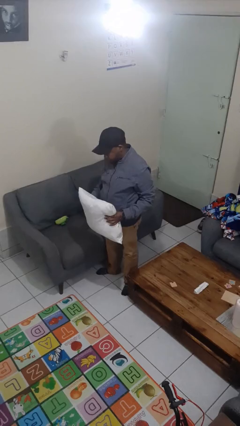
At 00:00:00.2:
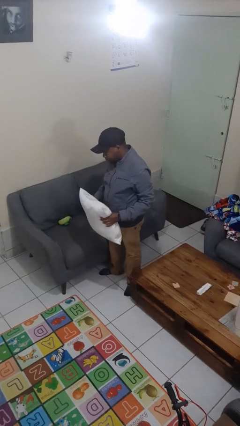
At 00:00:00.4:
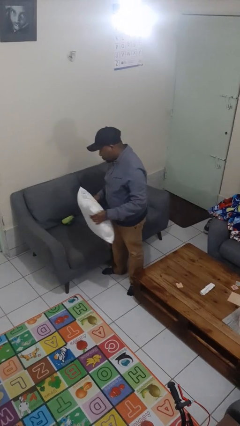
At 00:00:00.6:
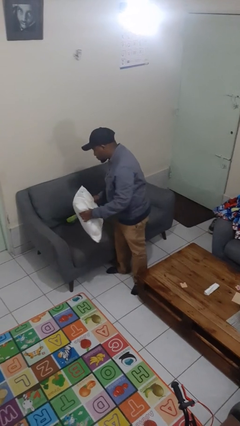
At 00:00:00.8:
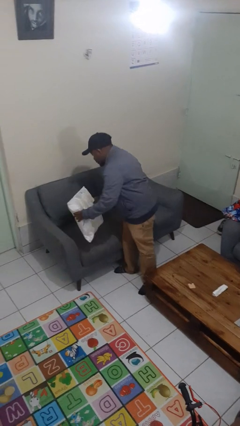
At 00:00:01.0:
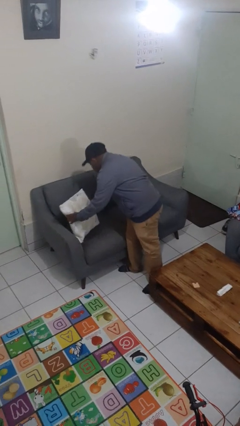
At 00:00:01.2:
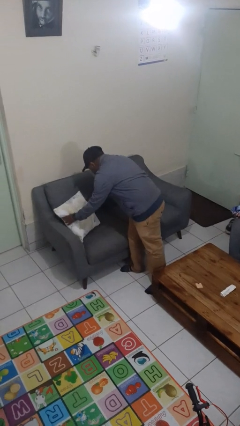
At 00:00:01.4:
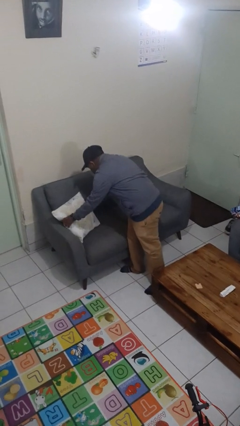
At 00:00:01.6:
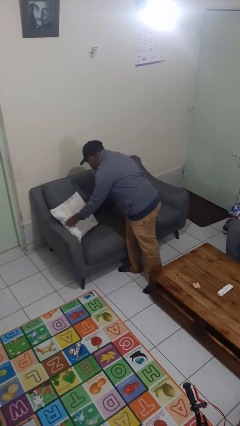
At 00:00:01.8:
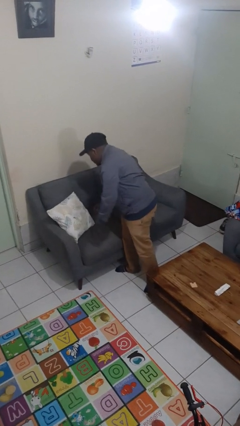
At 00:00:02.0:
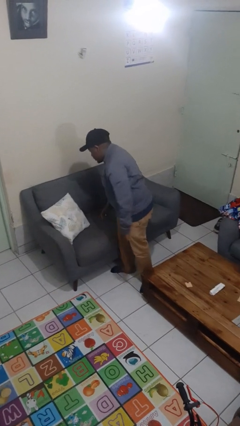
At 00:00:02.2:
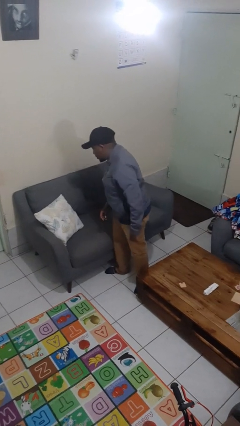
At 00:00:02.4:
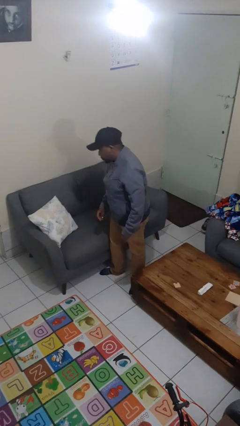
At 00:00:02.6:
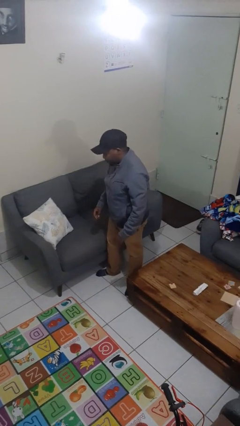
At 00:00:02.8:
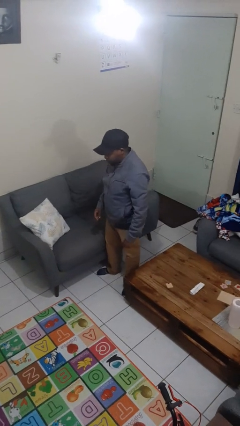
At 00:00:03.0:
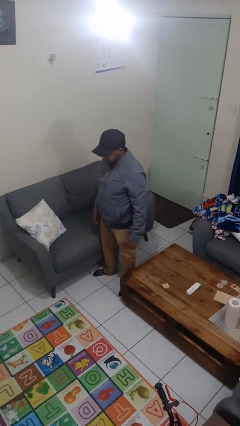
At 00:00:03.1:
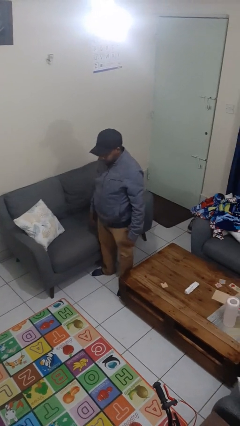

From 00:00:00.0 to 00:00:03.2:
person puts down object on couch

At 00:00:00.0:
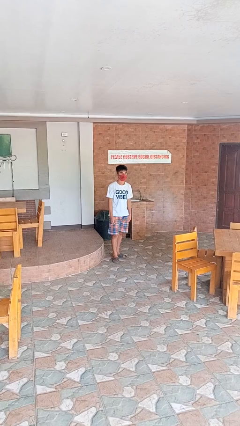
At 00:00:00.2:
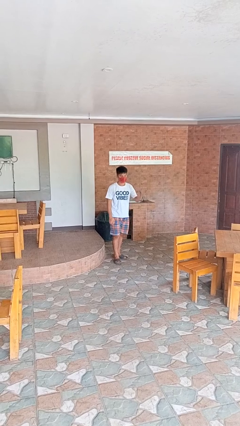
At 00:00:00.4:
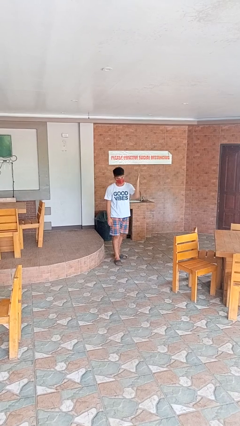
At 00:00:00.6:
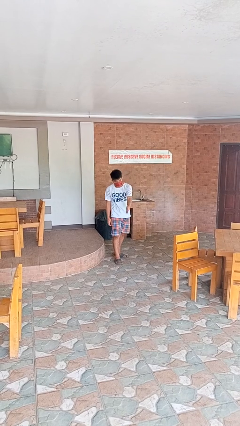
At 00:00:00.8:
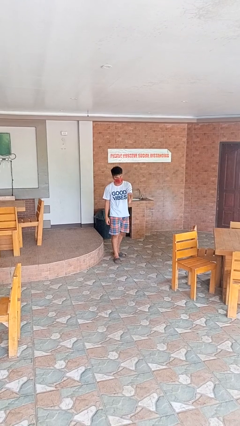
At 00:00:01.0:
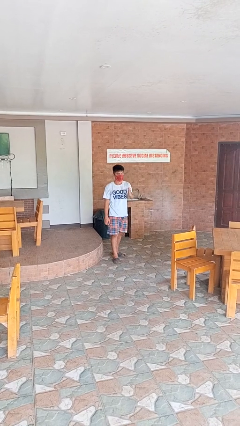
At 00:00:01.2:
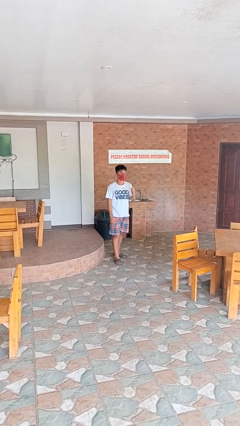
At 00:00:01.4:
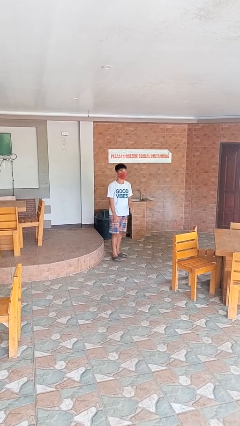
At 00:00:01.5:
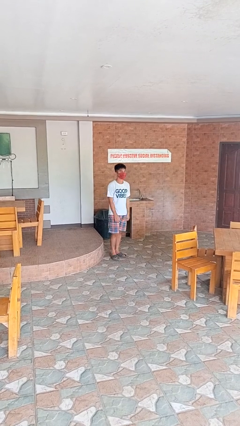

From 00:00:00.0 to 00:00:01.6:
person karate chop

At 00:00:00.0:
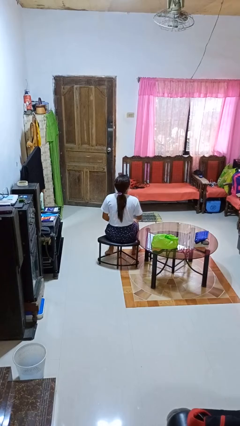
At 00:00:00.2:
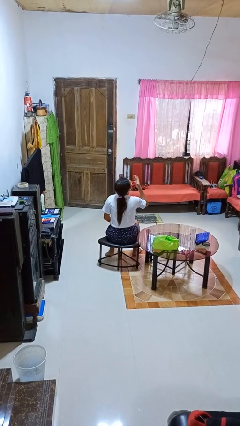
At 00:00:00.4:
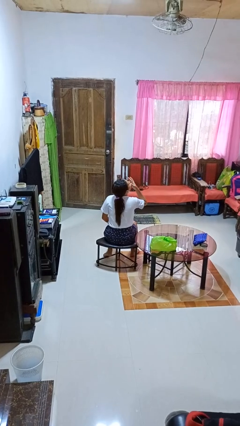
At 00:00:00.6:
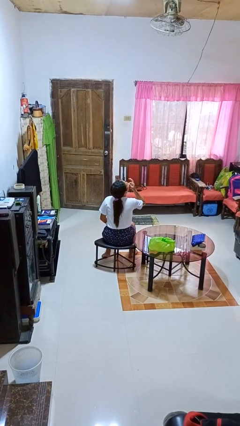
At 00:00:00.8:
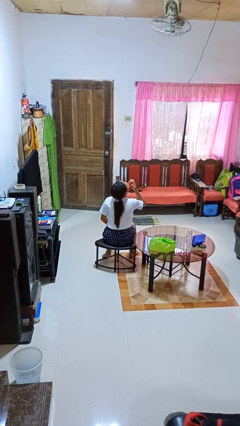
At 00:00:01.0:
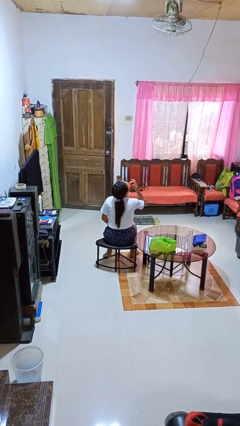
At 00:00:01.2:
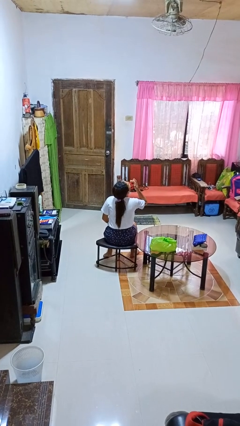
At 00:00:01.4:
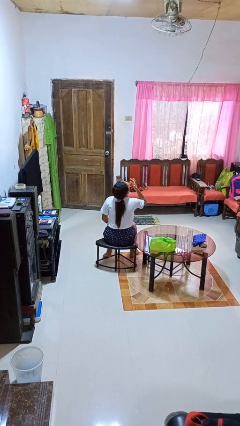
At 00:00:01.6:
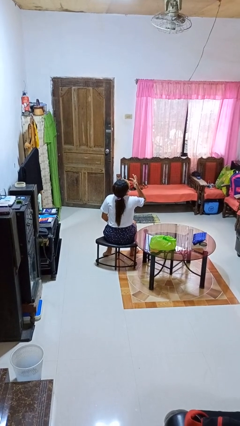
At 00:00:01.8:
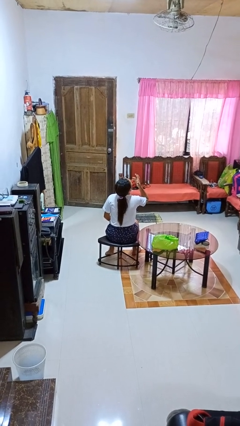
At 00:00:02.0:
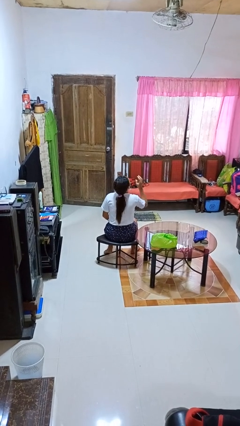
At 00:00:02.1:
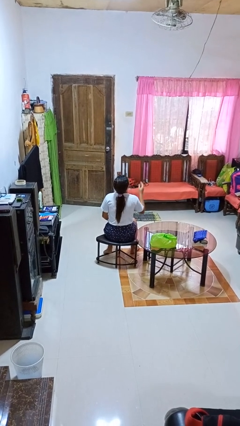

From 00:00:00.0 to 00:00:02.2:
person licks fingers

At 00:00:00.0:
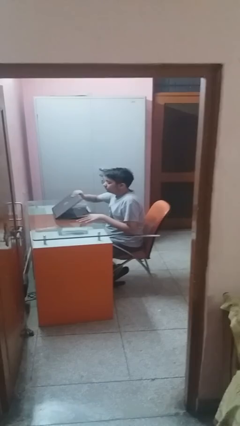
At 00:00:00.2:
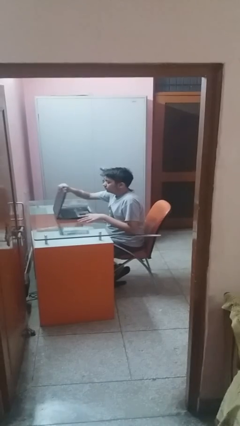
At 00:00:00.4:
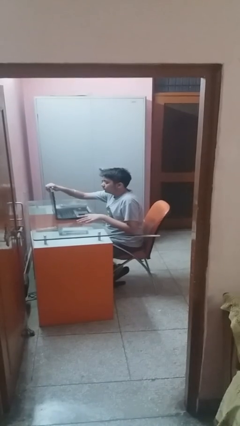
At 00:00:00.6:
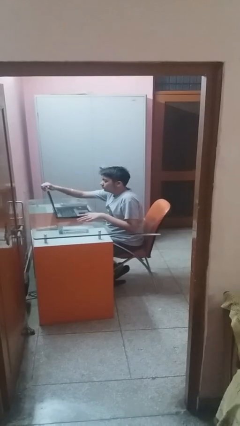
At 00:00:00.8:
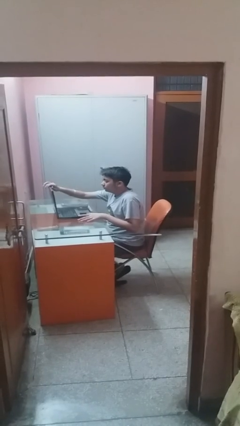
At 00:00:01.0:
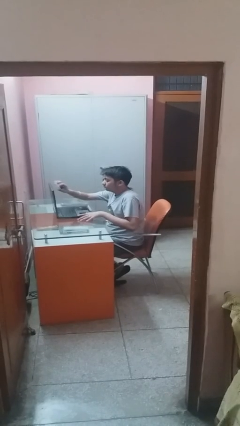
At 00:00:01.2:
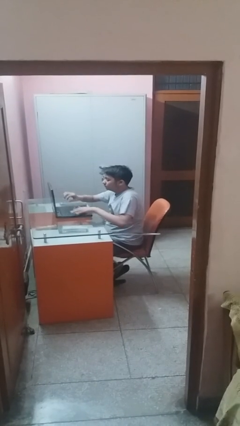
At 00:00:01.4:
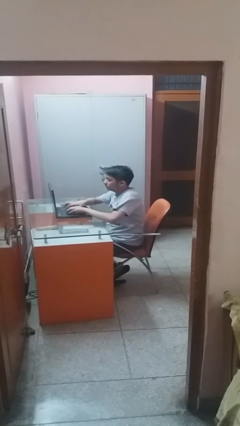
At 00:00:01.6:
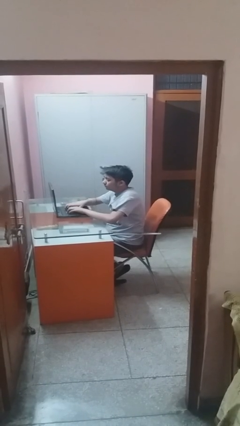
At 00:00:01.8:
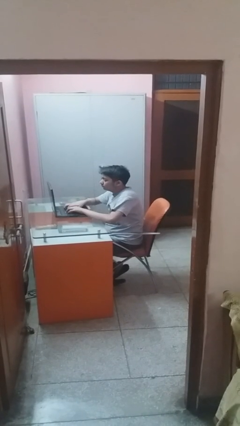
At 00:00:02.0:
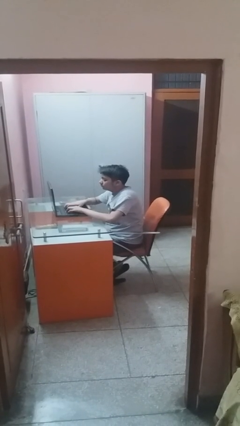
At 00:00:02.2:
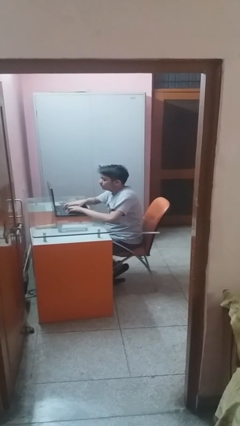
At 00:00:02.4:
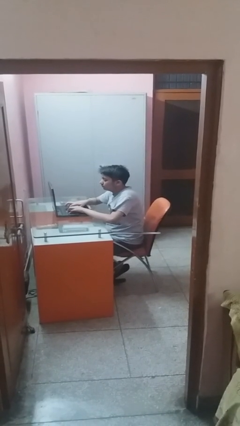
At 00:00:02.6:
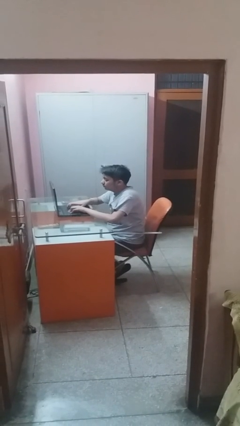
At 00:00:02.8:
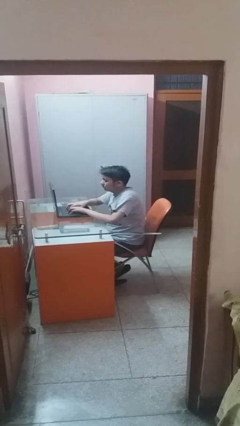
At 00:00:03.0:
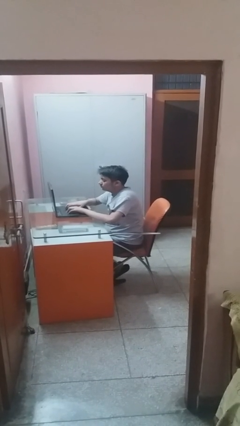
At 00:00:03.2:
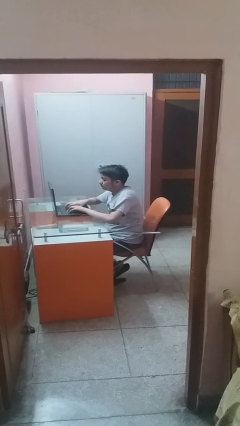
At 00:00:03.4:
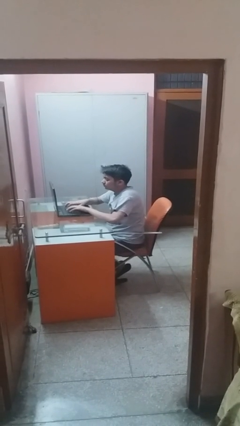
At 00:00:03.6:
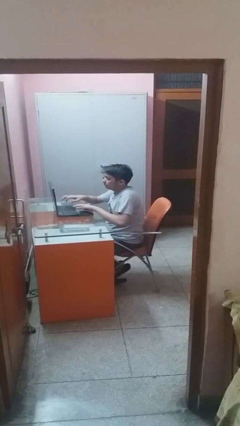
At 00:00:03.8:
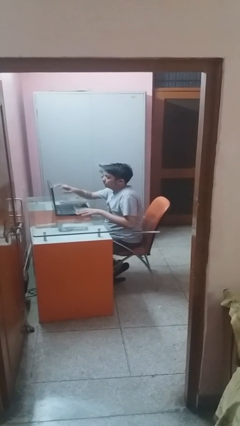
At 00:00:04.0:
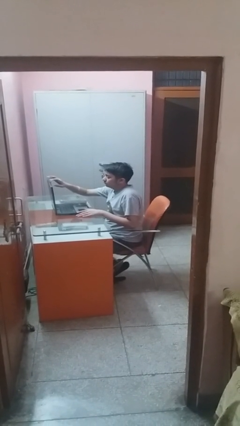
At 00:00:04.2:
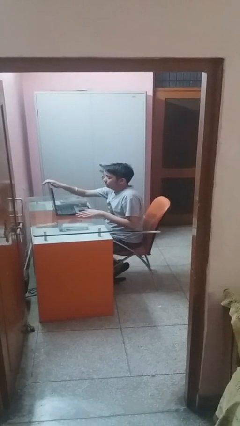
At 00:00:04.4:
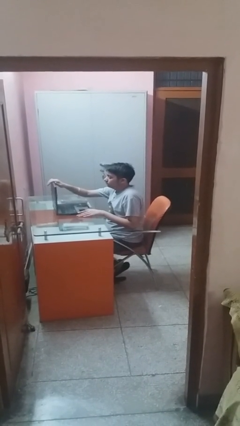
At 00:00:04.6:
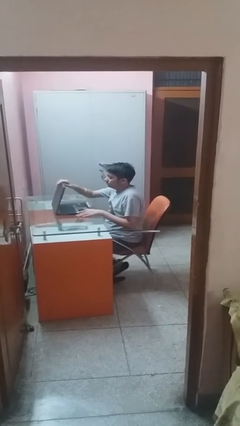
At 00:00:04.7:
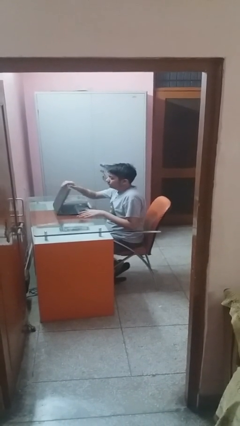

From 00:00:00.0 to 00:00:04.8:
person interacts with laptop

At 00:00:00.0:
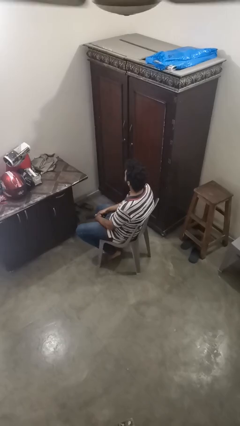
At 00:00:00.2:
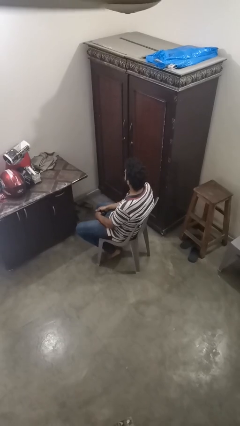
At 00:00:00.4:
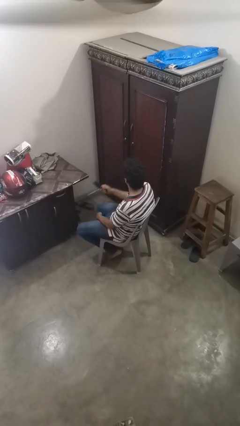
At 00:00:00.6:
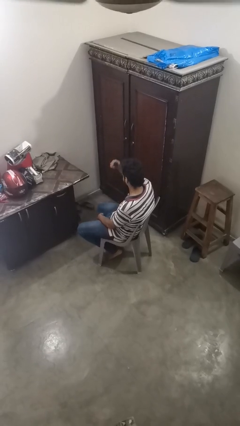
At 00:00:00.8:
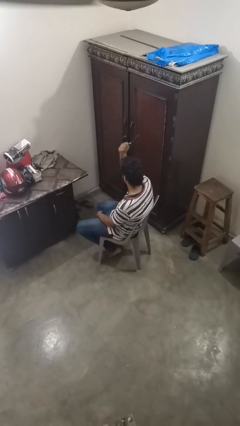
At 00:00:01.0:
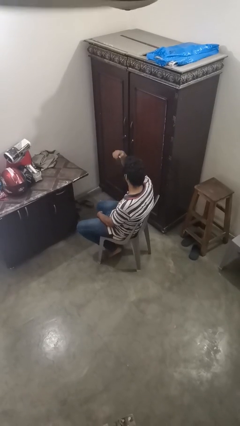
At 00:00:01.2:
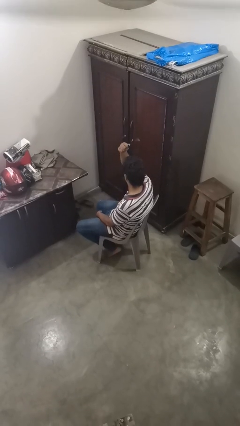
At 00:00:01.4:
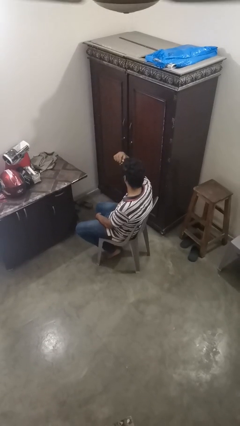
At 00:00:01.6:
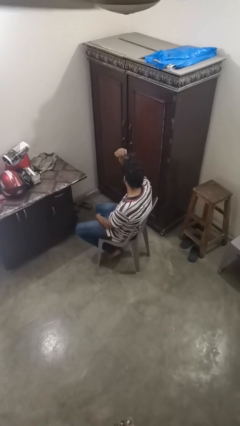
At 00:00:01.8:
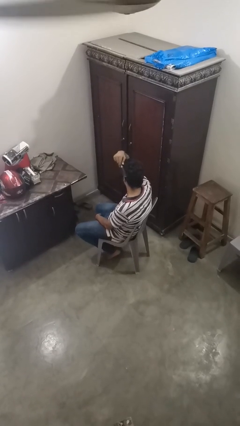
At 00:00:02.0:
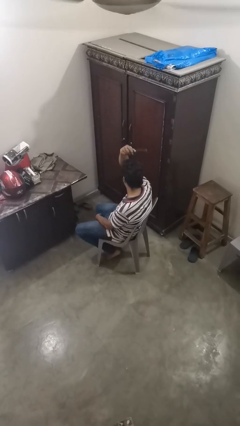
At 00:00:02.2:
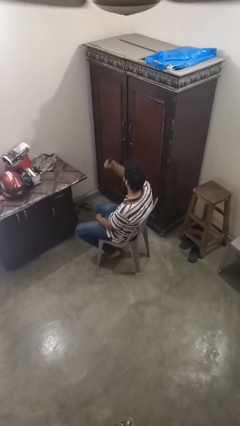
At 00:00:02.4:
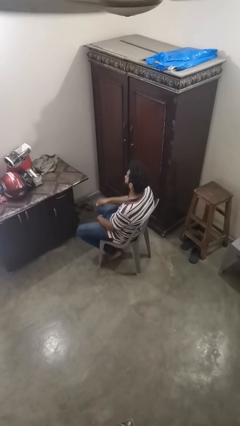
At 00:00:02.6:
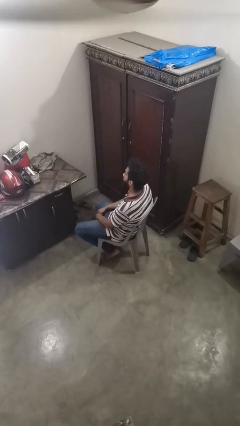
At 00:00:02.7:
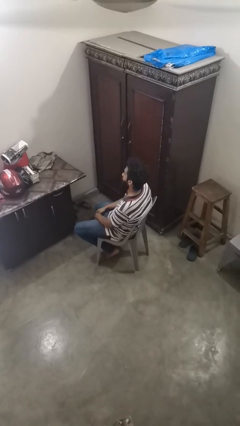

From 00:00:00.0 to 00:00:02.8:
person brushes hair

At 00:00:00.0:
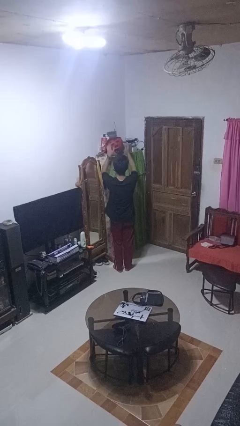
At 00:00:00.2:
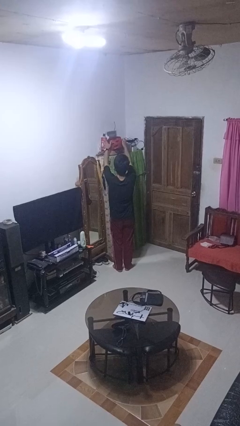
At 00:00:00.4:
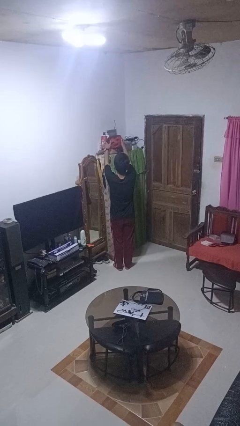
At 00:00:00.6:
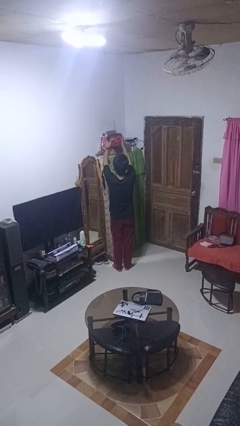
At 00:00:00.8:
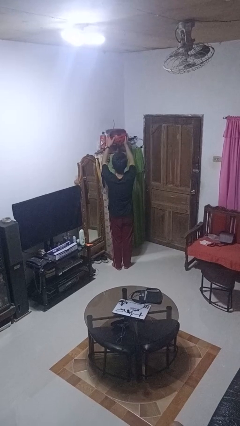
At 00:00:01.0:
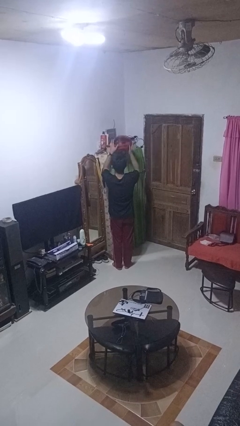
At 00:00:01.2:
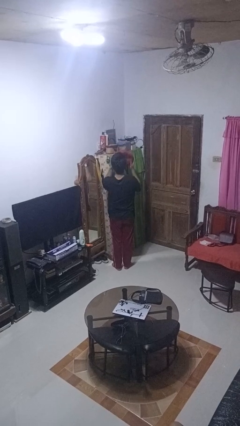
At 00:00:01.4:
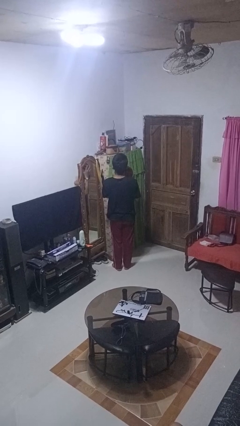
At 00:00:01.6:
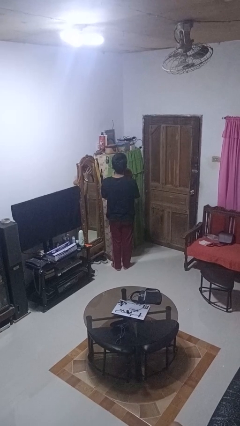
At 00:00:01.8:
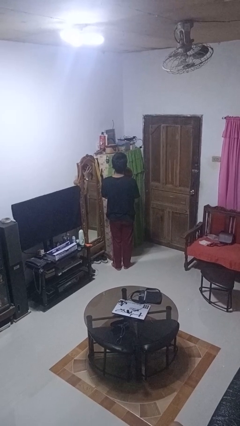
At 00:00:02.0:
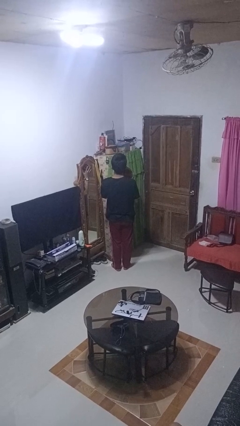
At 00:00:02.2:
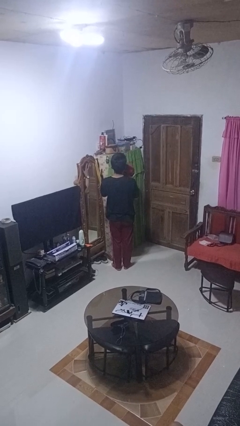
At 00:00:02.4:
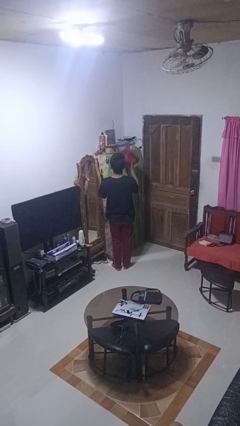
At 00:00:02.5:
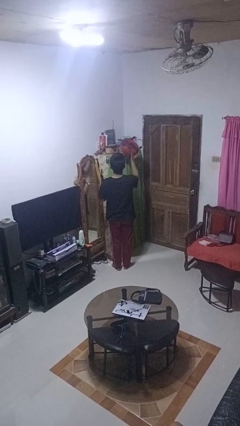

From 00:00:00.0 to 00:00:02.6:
person picks up object from shelf
